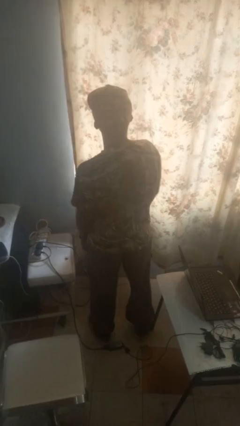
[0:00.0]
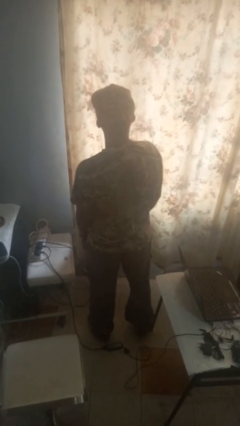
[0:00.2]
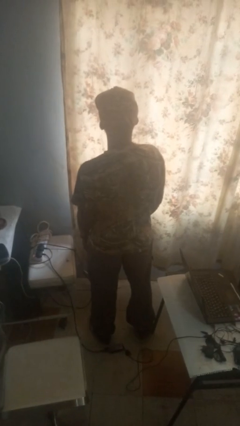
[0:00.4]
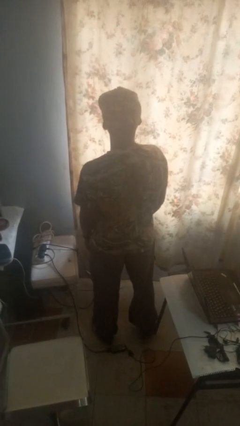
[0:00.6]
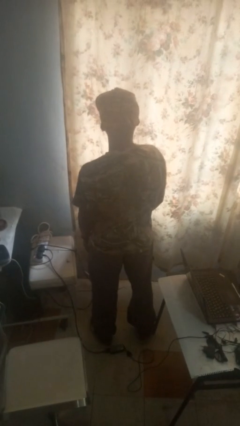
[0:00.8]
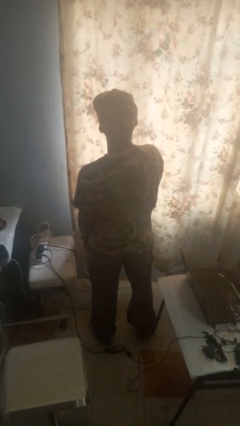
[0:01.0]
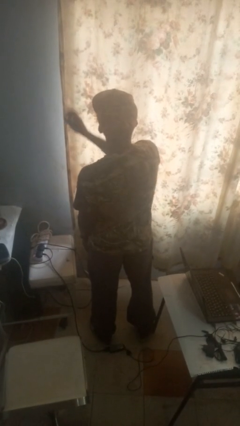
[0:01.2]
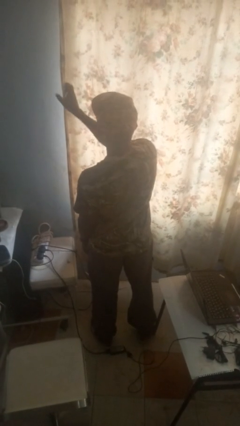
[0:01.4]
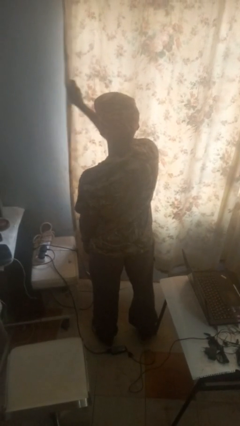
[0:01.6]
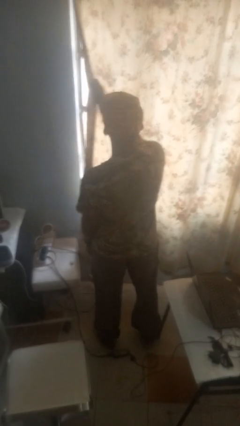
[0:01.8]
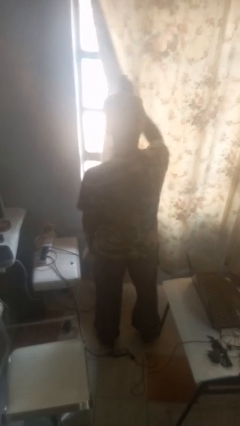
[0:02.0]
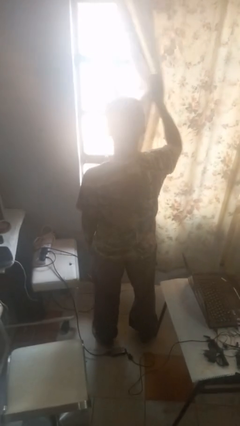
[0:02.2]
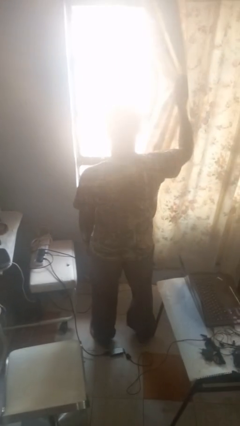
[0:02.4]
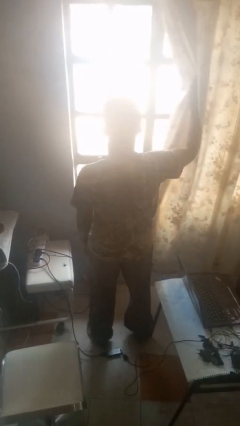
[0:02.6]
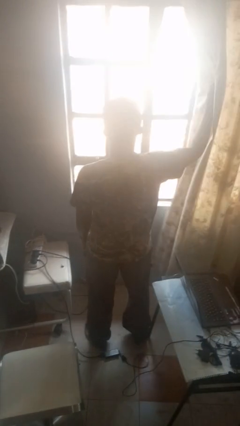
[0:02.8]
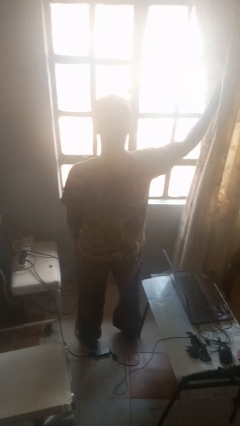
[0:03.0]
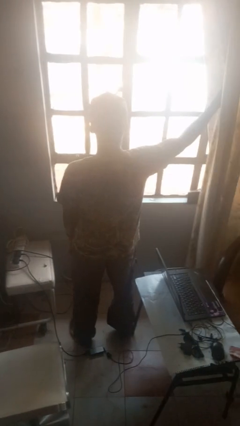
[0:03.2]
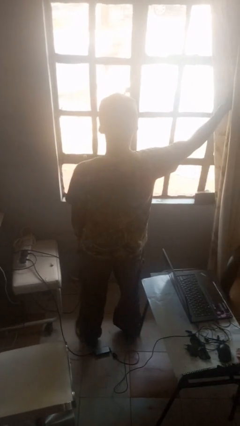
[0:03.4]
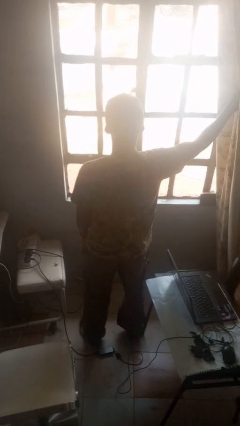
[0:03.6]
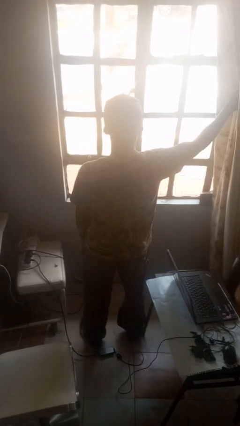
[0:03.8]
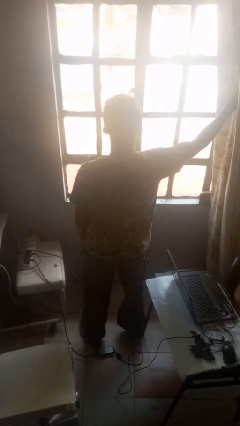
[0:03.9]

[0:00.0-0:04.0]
person opens curtains

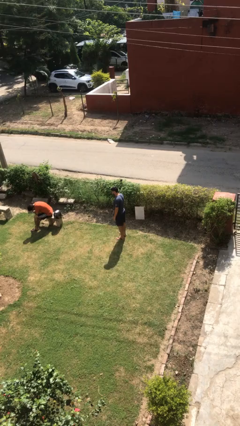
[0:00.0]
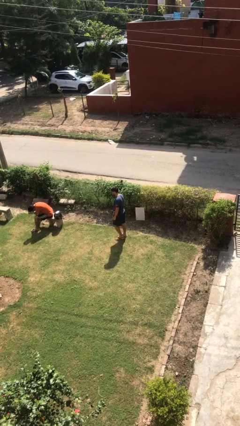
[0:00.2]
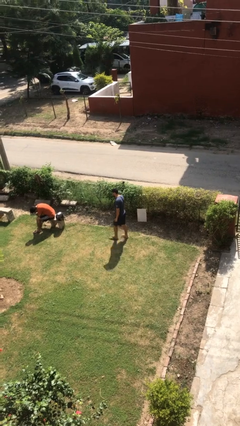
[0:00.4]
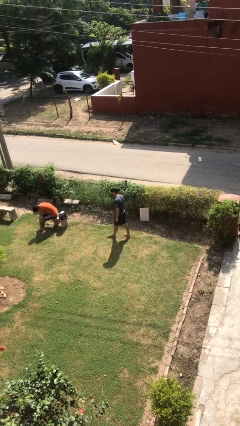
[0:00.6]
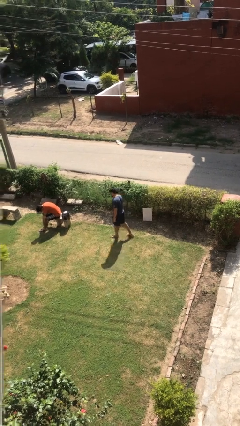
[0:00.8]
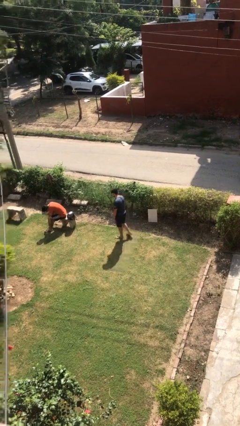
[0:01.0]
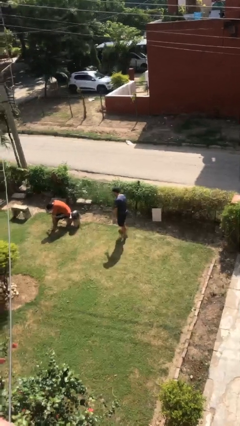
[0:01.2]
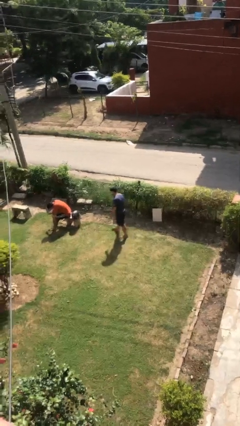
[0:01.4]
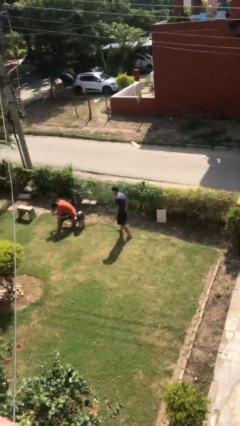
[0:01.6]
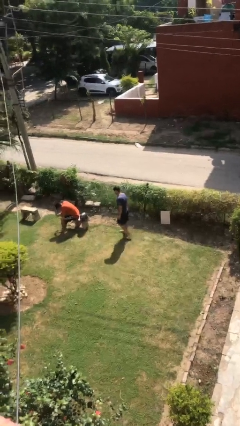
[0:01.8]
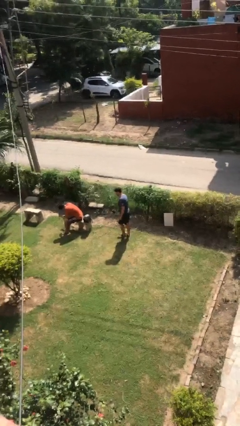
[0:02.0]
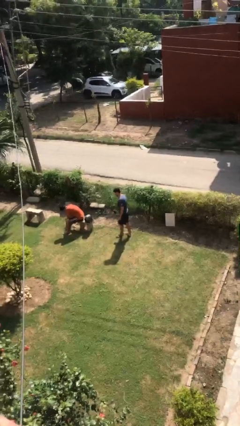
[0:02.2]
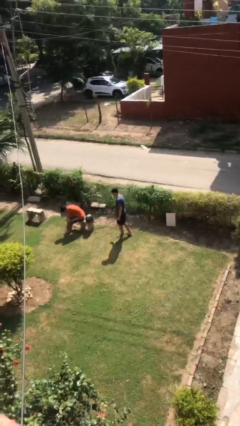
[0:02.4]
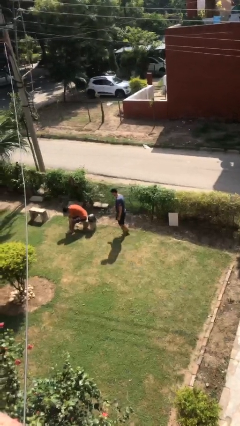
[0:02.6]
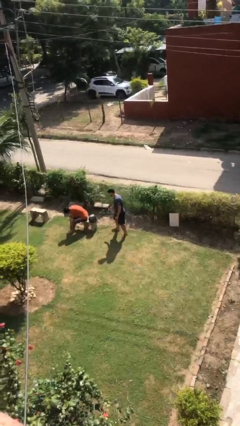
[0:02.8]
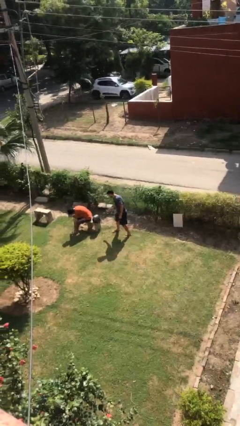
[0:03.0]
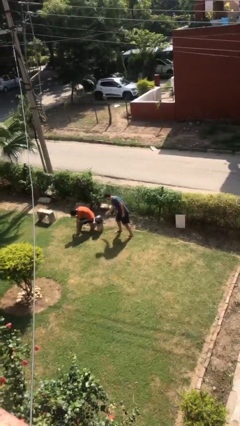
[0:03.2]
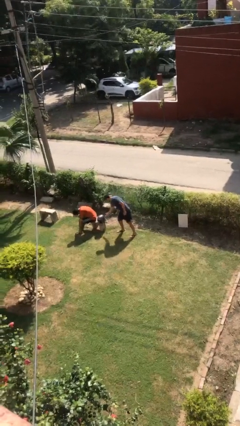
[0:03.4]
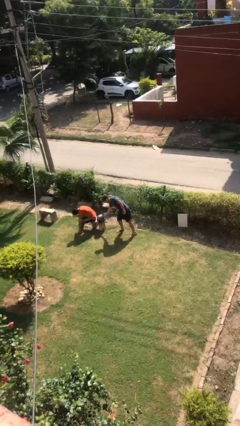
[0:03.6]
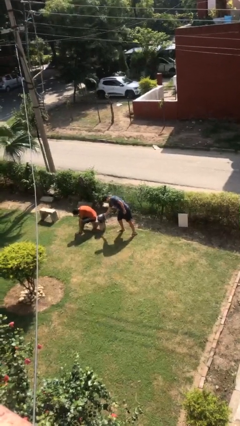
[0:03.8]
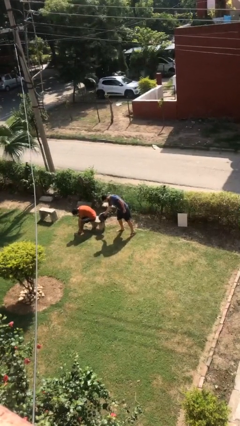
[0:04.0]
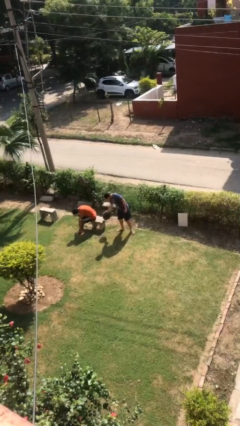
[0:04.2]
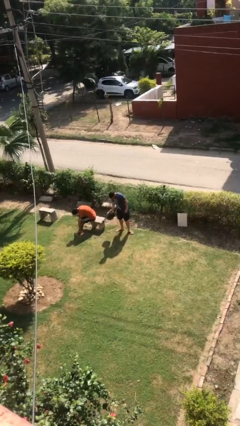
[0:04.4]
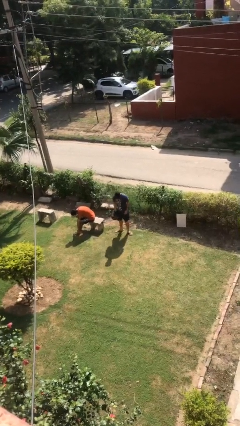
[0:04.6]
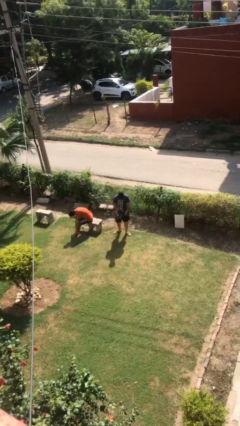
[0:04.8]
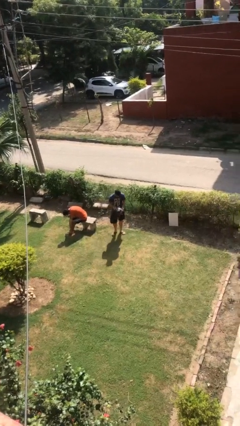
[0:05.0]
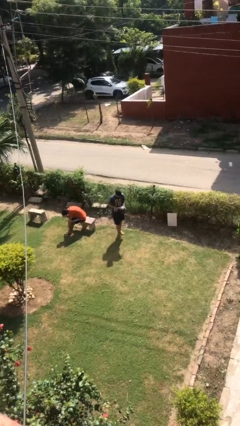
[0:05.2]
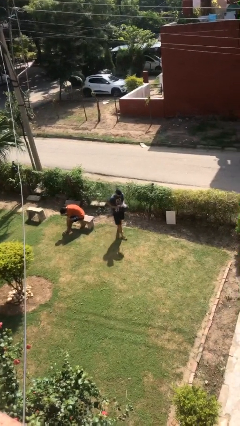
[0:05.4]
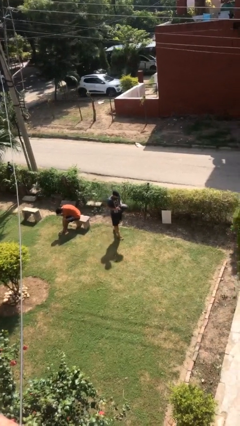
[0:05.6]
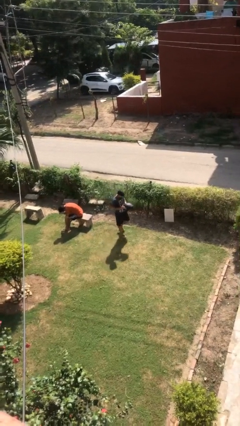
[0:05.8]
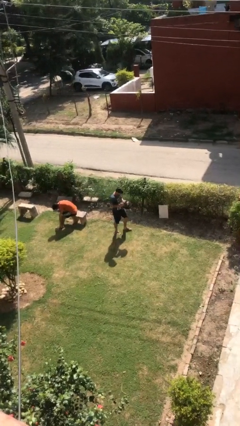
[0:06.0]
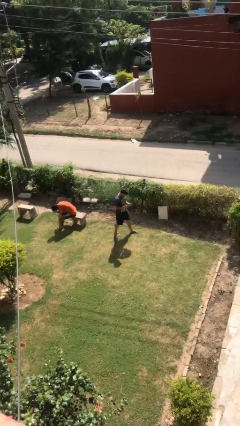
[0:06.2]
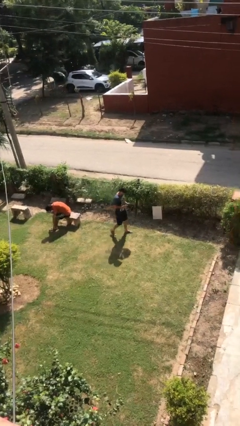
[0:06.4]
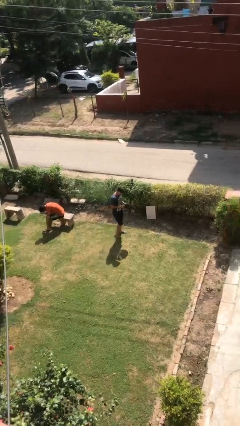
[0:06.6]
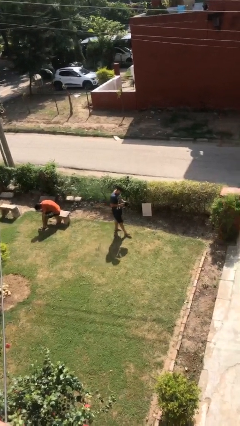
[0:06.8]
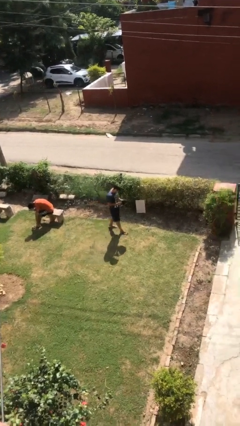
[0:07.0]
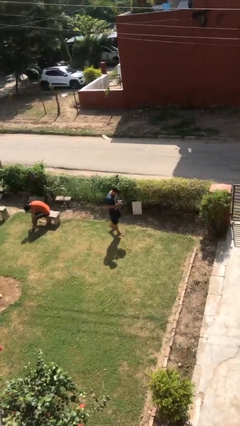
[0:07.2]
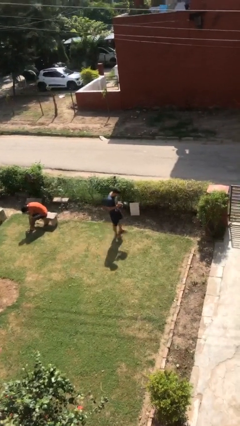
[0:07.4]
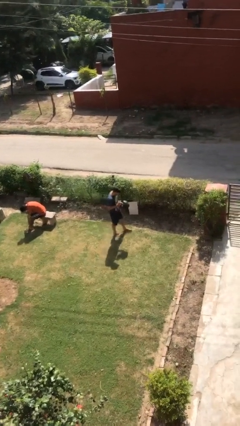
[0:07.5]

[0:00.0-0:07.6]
person steals object from person

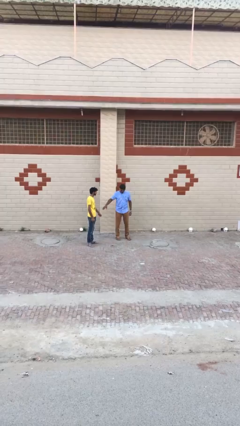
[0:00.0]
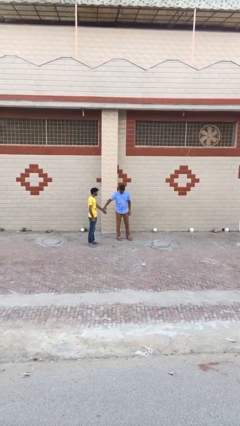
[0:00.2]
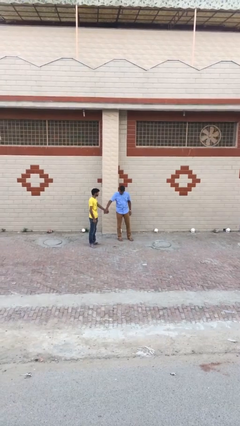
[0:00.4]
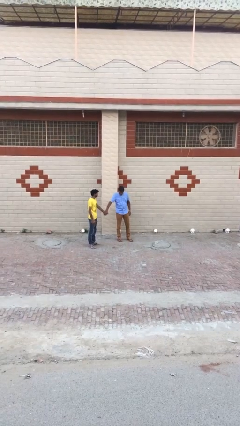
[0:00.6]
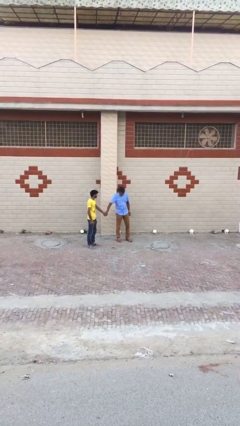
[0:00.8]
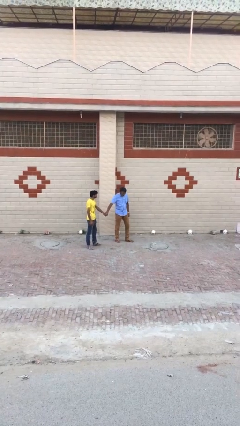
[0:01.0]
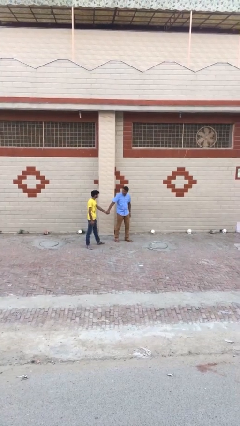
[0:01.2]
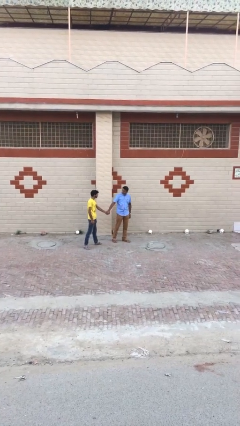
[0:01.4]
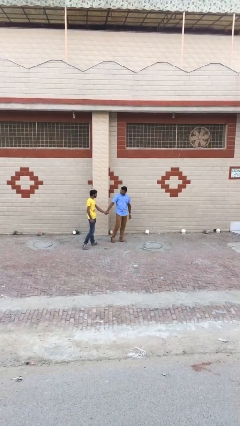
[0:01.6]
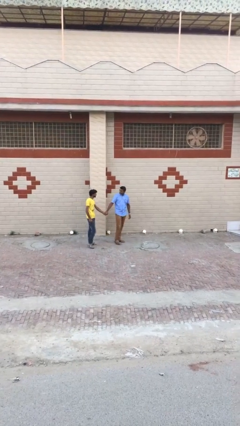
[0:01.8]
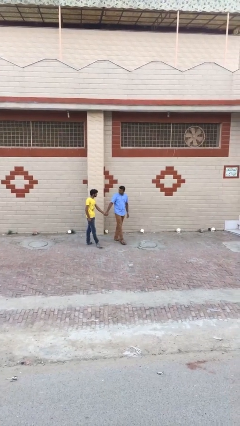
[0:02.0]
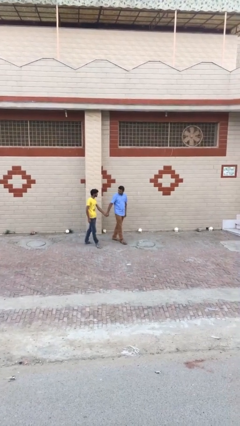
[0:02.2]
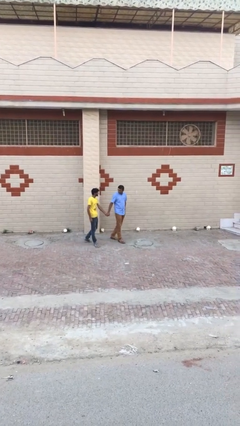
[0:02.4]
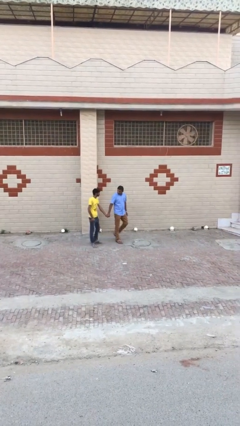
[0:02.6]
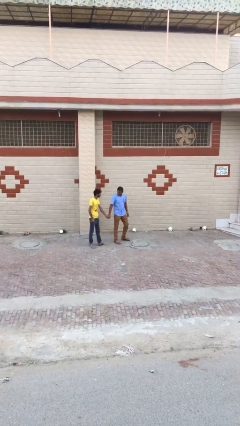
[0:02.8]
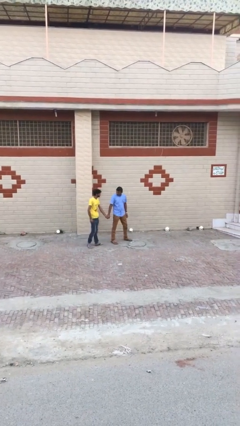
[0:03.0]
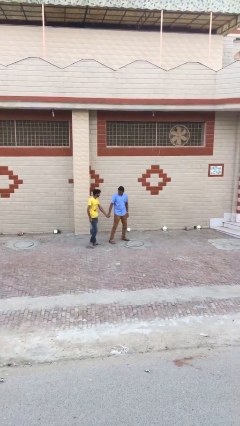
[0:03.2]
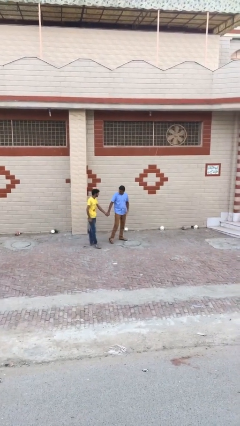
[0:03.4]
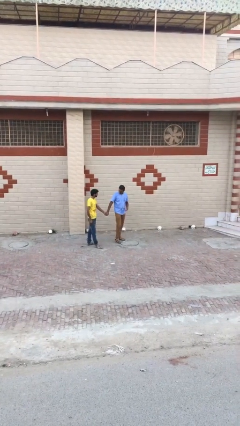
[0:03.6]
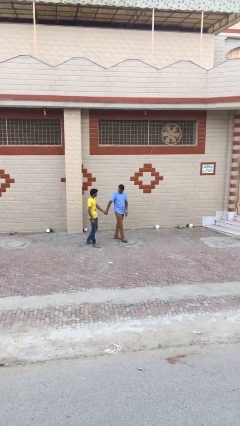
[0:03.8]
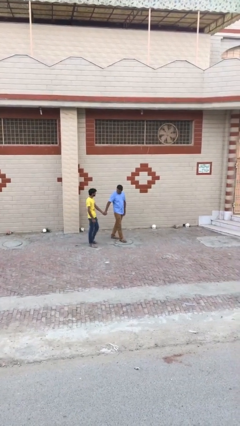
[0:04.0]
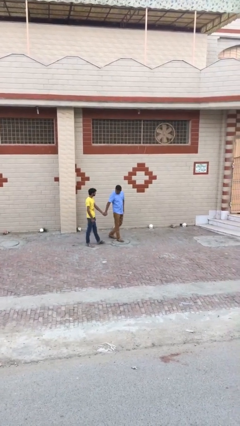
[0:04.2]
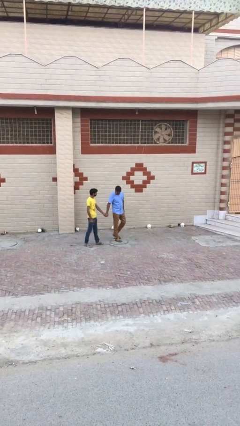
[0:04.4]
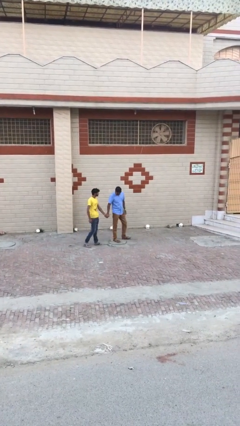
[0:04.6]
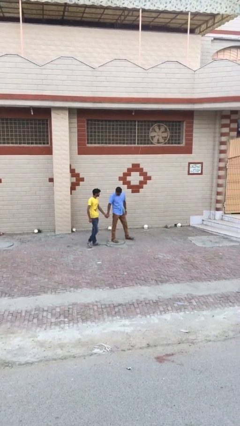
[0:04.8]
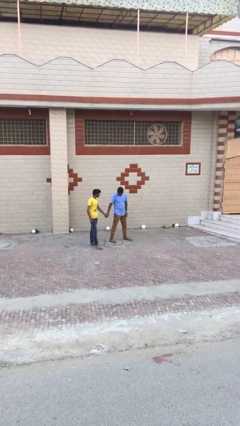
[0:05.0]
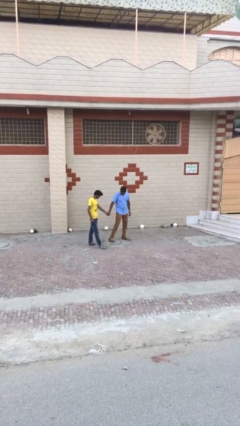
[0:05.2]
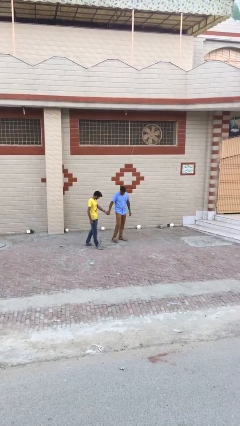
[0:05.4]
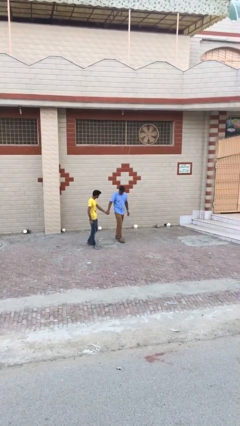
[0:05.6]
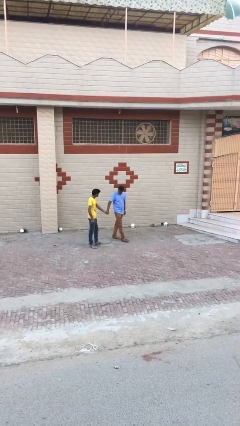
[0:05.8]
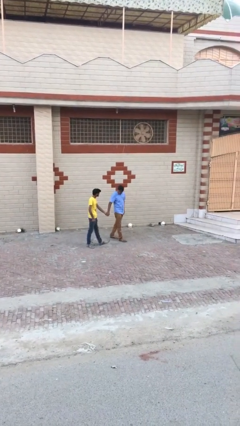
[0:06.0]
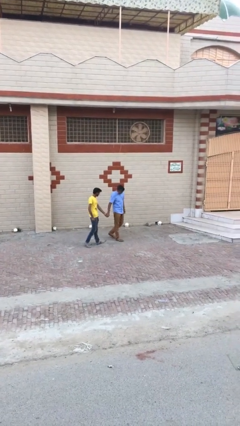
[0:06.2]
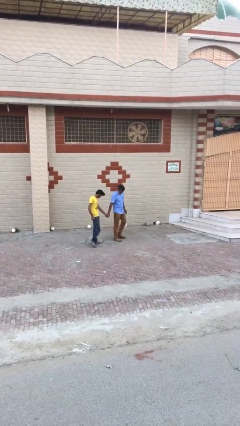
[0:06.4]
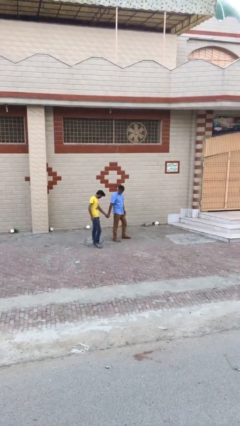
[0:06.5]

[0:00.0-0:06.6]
person holds hand
